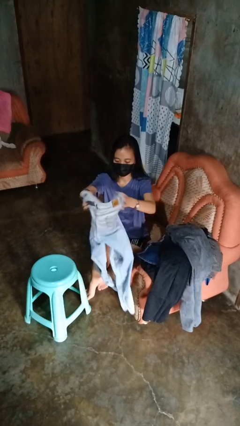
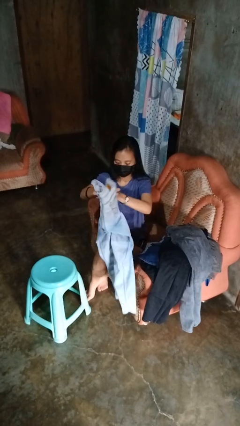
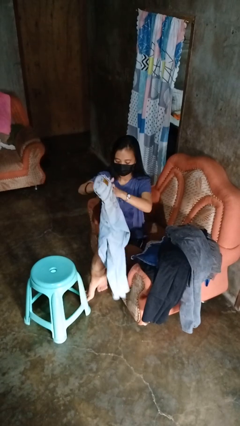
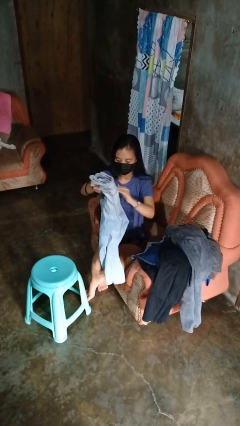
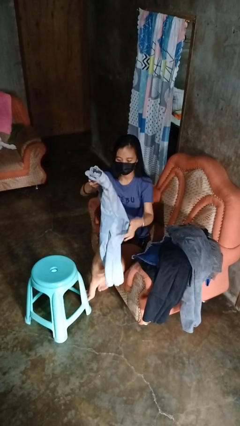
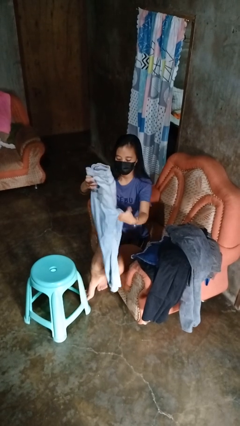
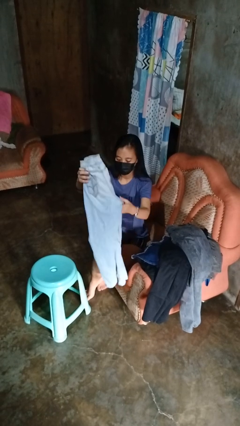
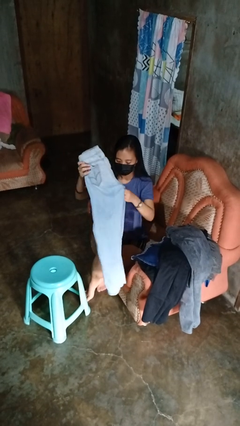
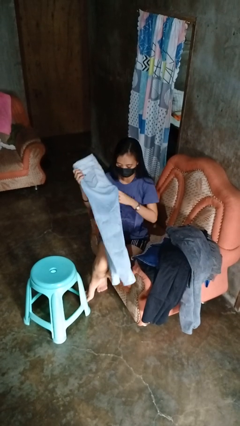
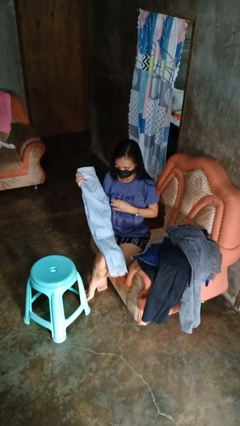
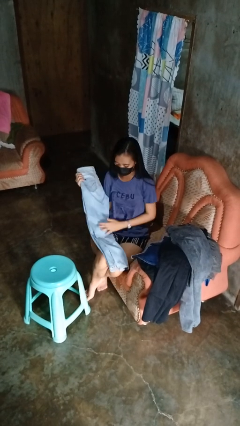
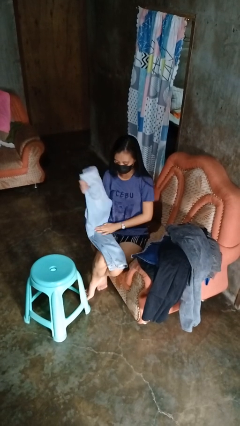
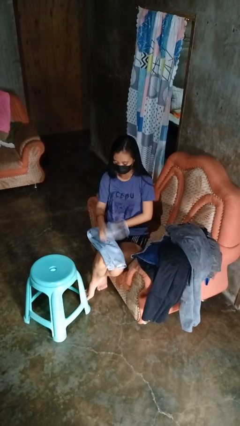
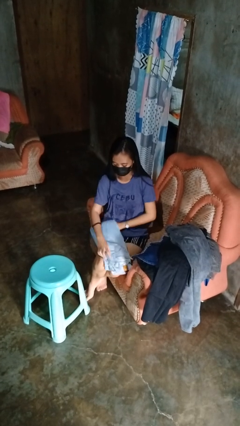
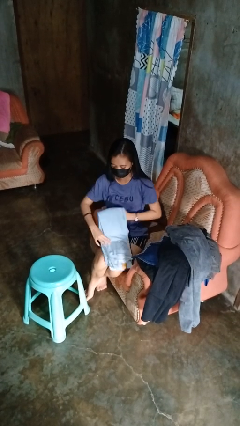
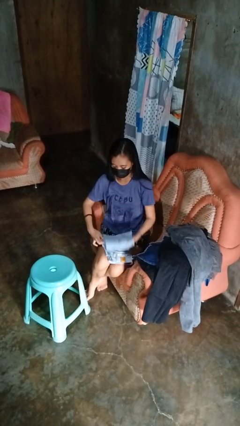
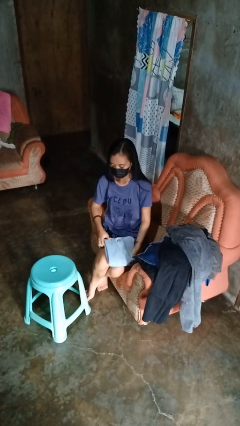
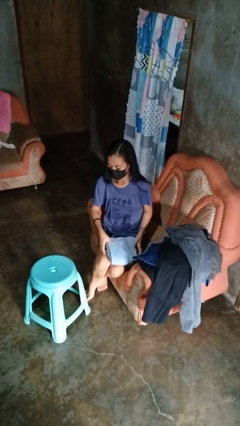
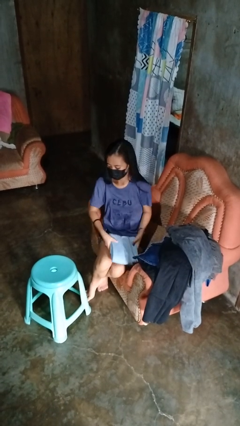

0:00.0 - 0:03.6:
person folds pants

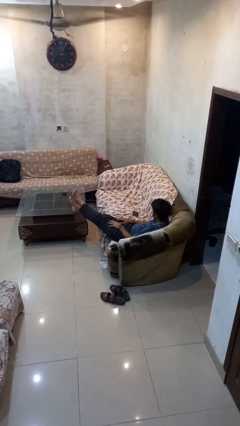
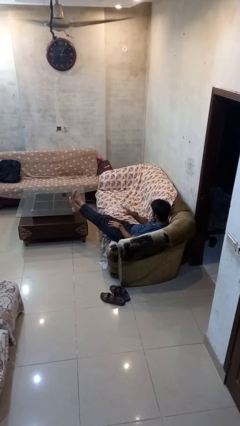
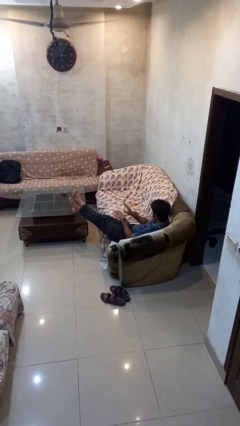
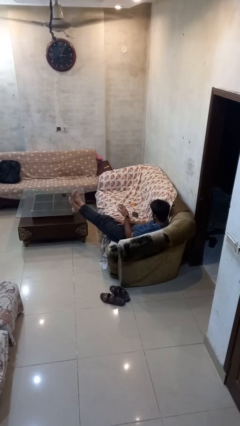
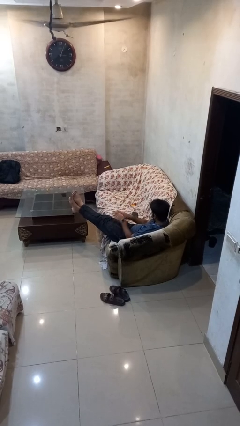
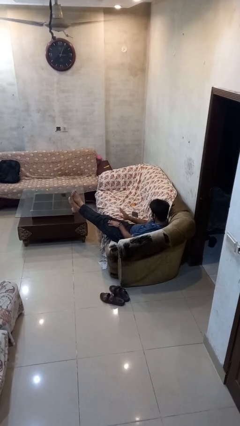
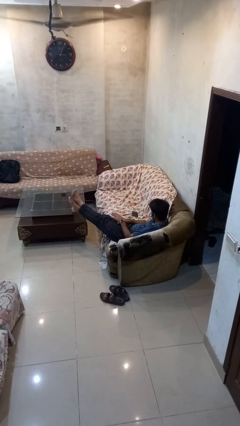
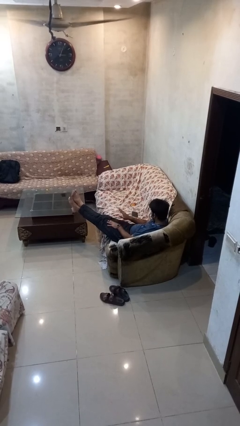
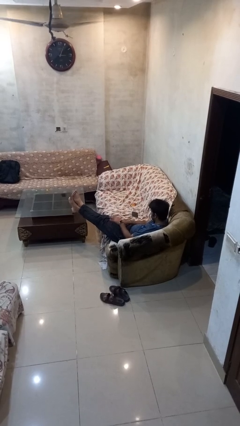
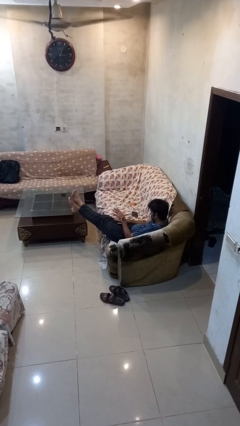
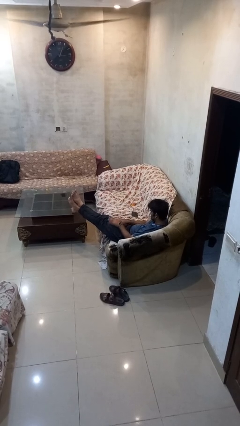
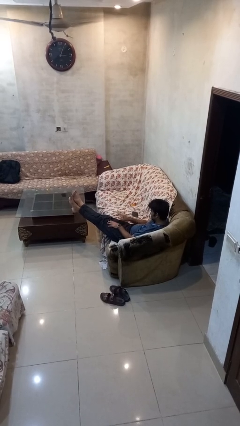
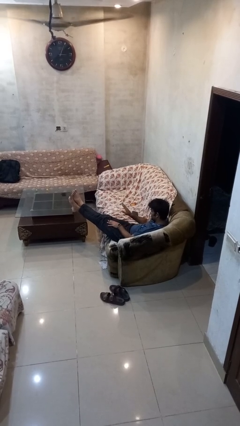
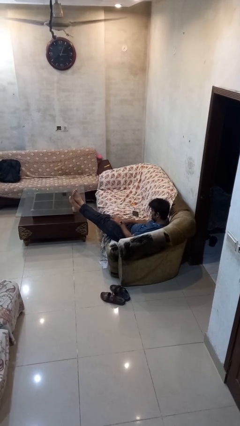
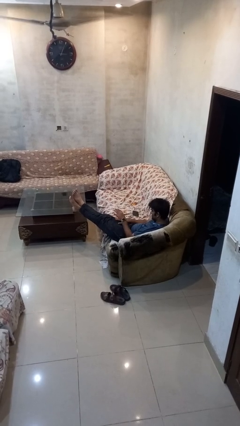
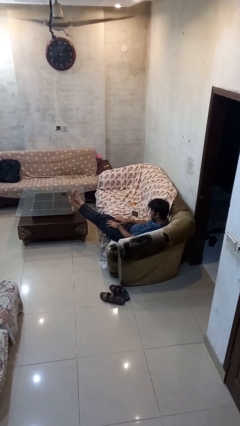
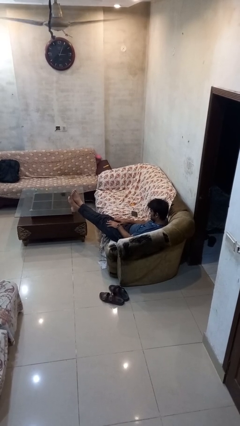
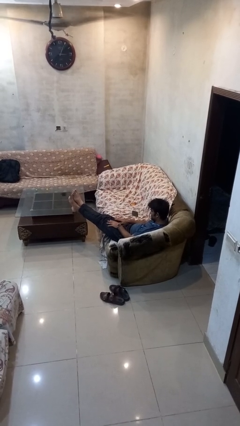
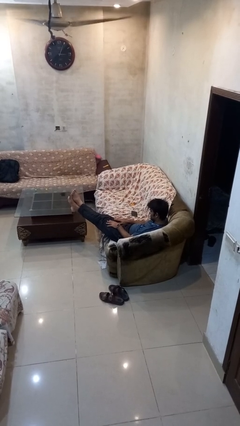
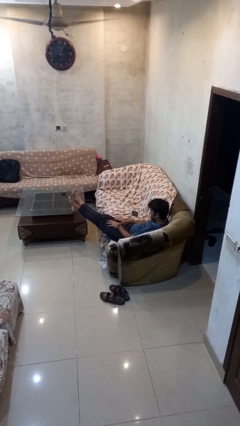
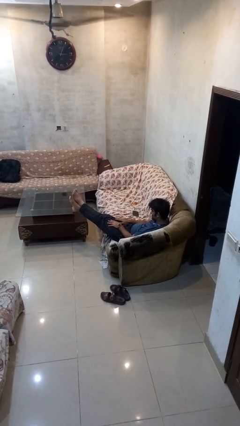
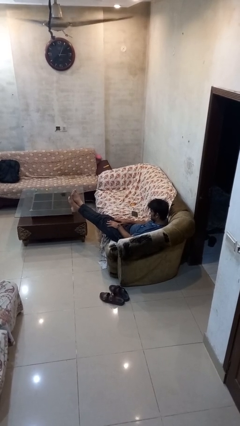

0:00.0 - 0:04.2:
person slaps hands on thighs

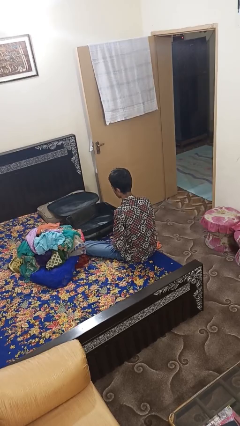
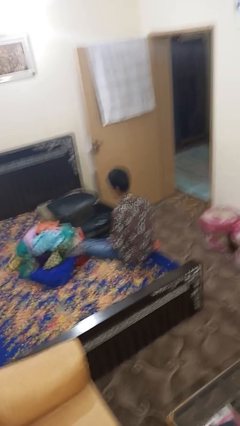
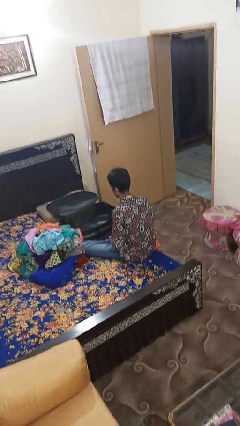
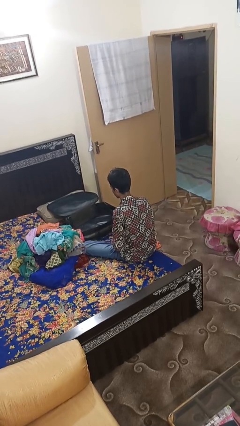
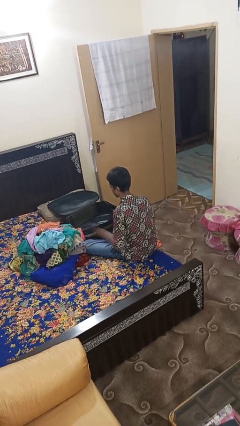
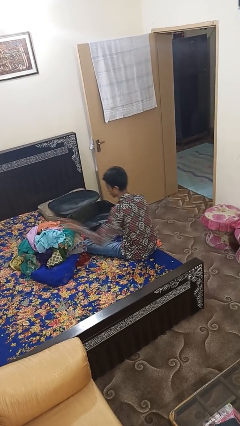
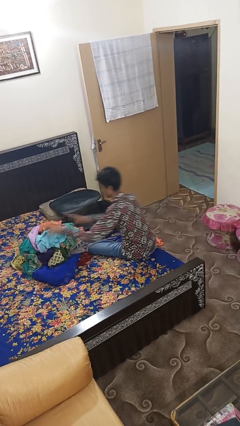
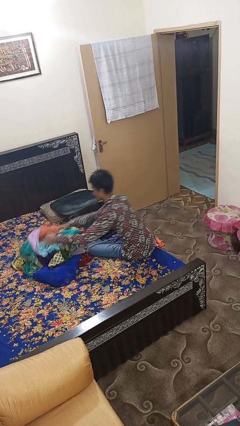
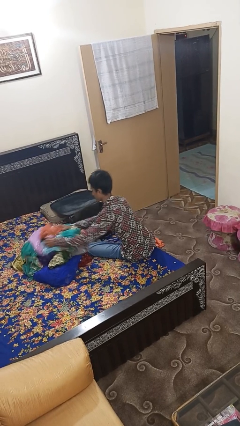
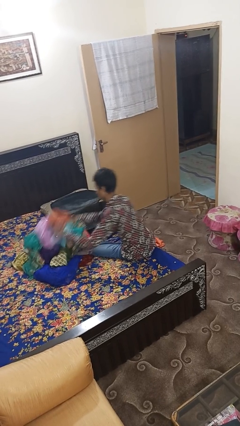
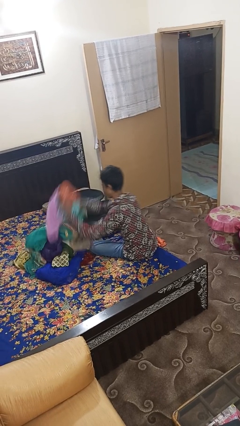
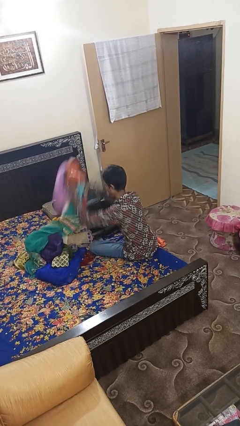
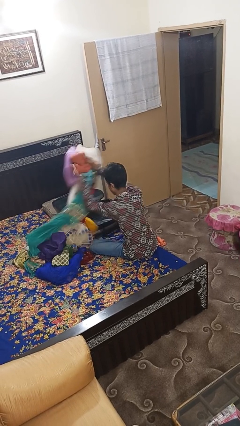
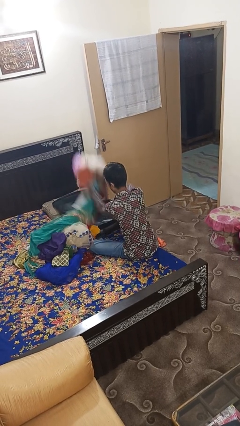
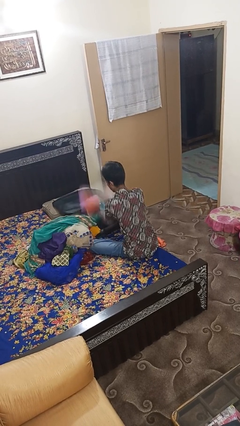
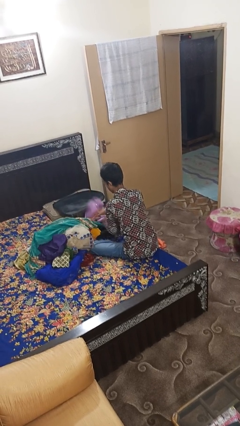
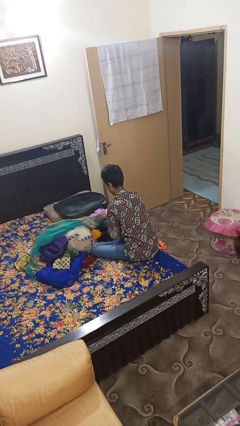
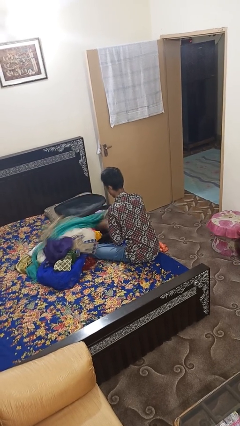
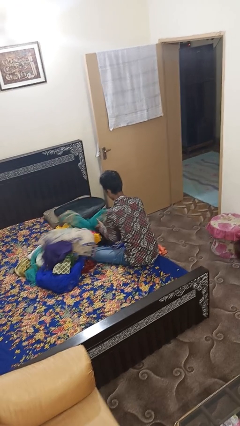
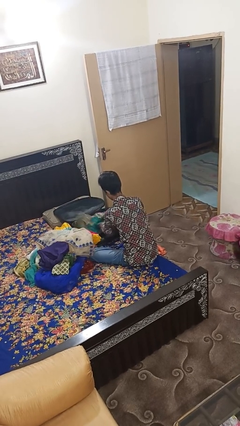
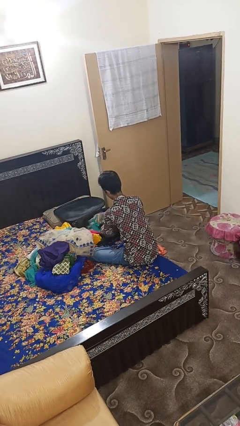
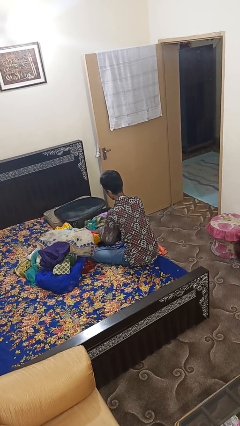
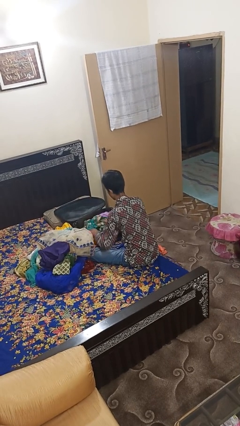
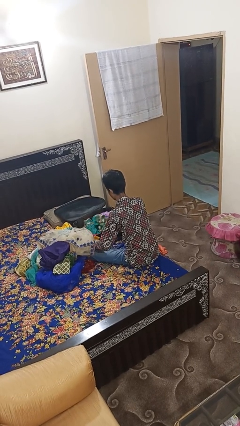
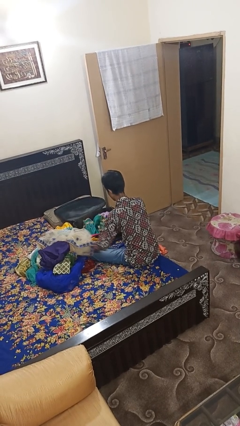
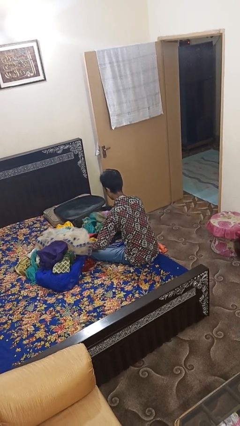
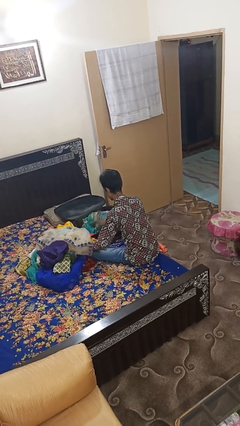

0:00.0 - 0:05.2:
person loads clothes into suitcase

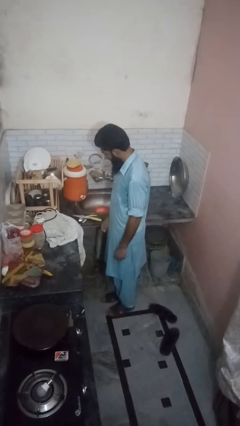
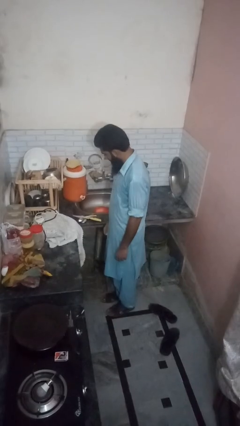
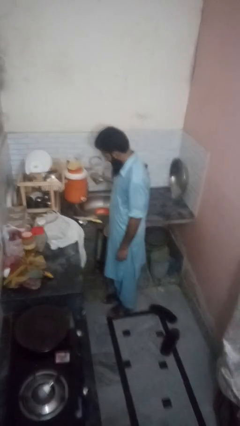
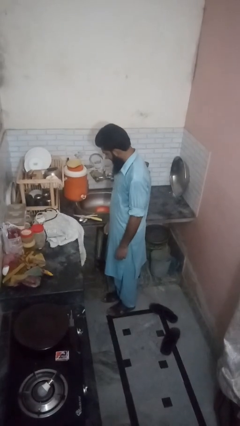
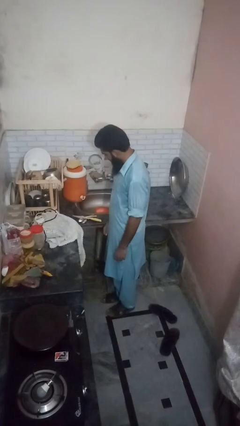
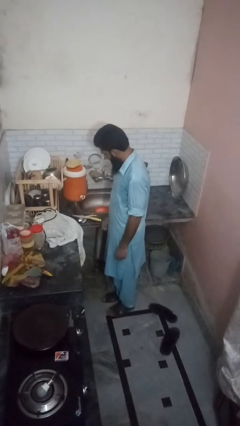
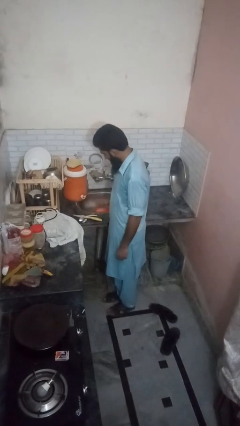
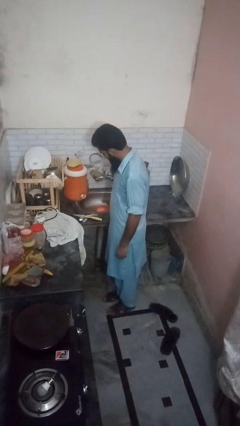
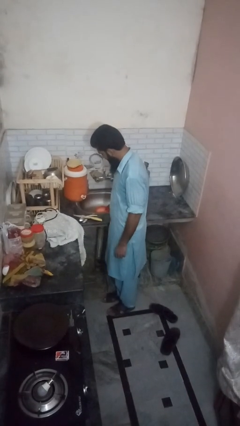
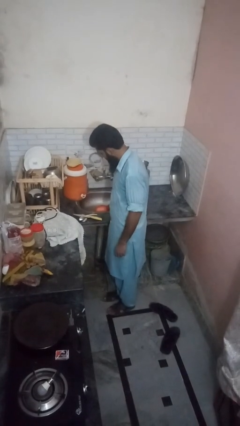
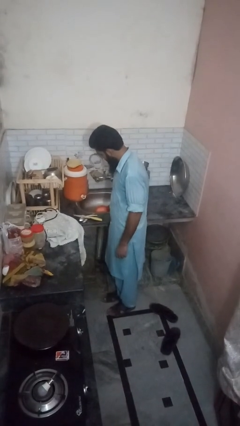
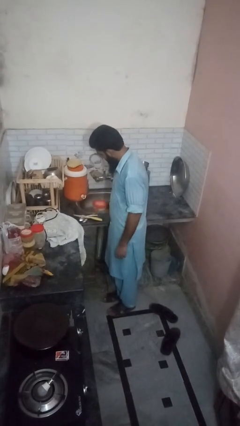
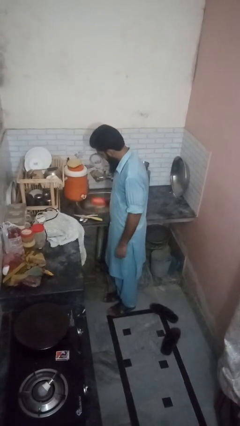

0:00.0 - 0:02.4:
person unloads dishwasher

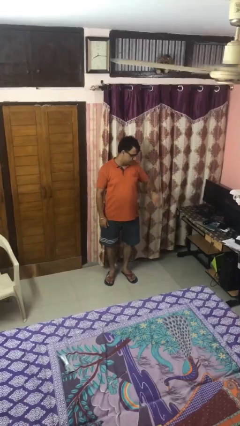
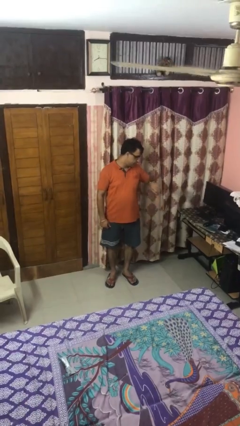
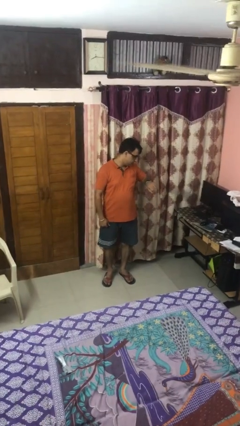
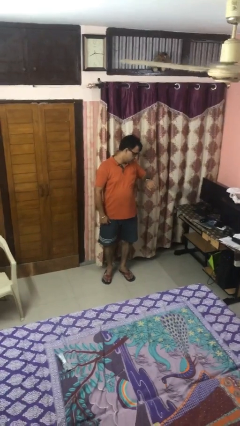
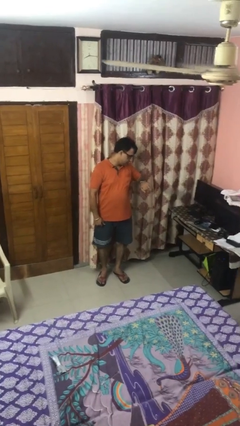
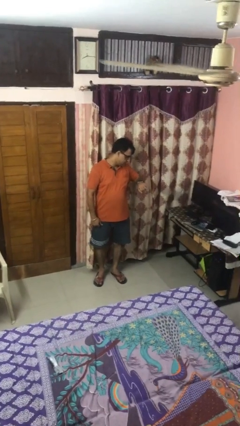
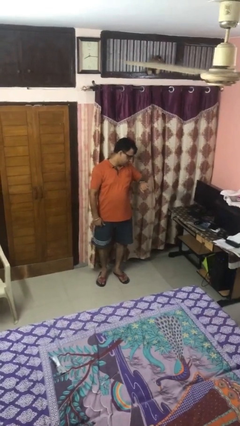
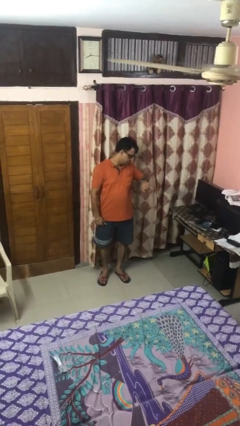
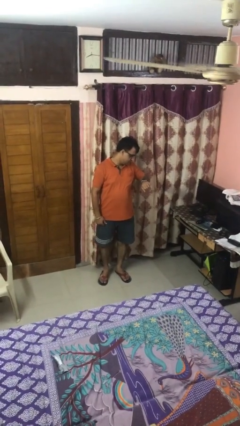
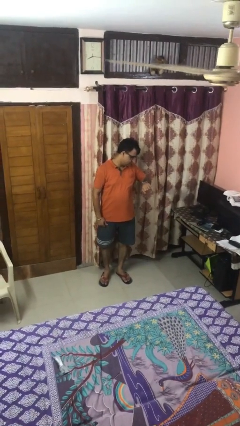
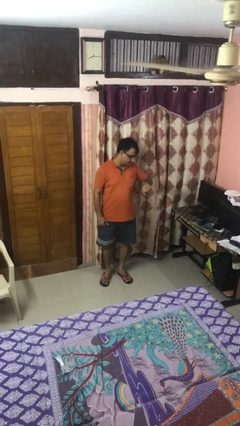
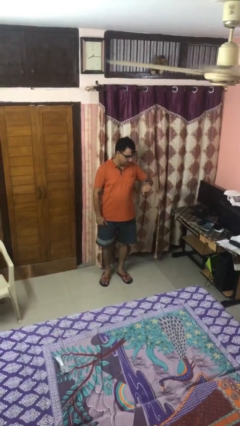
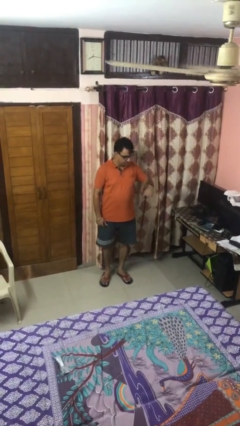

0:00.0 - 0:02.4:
person looks at wristwatch
